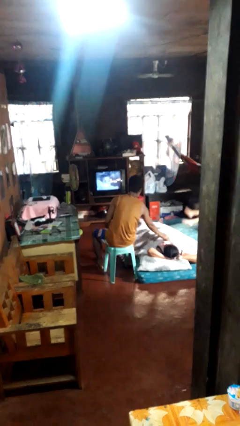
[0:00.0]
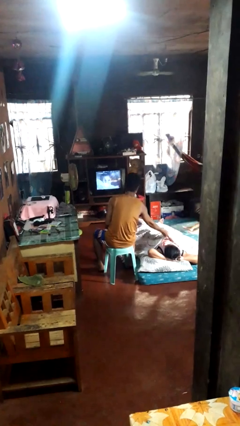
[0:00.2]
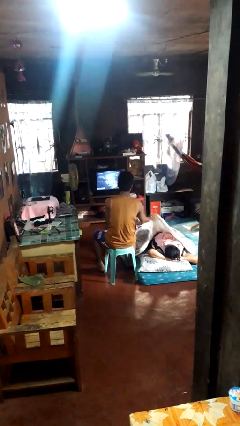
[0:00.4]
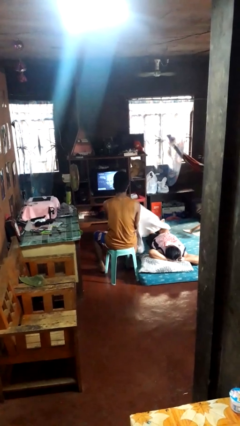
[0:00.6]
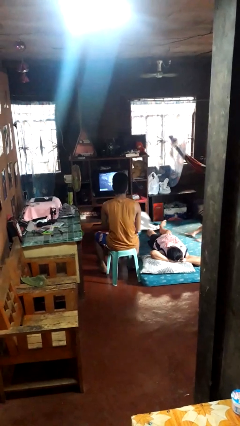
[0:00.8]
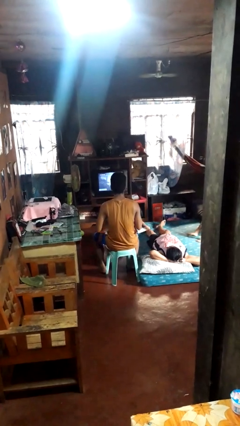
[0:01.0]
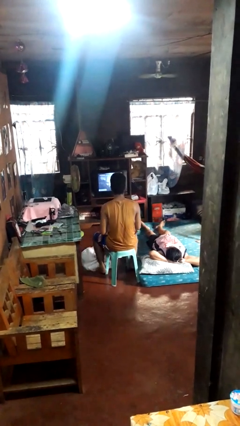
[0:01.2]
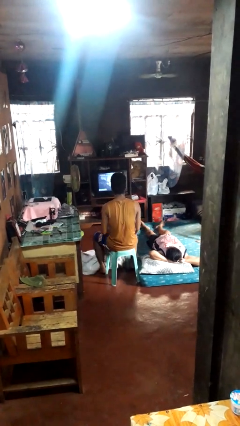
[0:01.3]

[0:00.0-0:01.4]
person uncovers friend with blanket

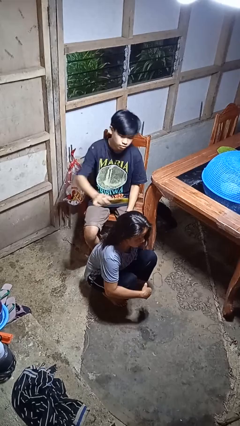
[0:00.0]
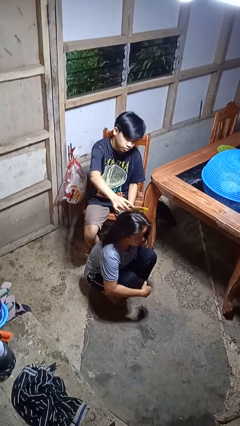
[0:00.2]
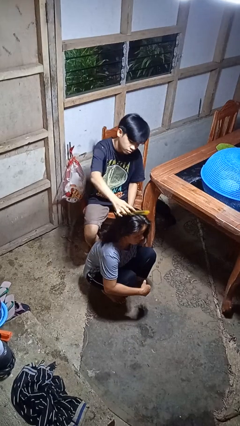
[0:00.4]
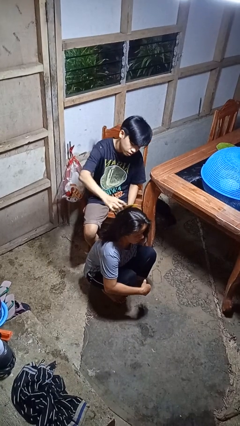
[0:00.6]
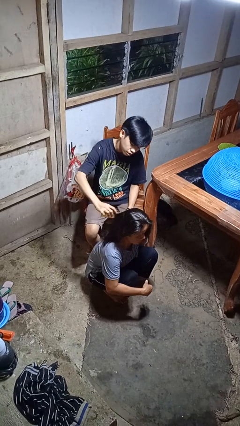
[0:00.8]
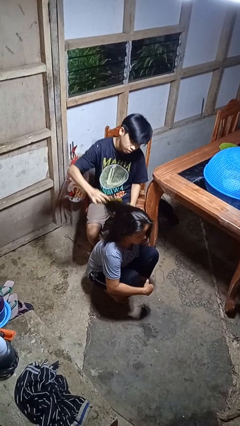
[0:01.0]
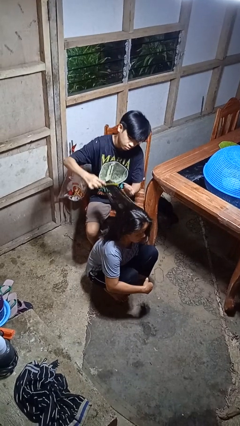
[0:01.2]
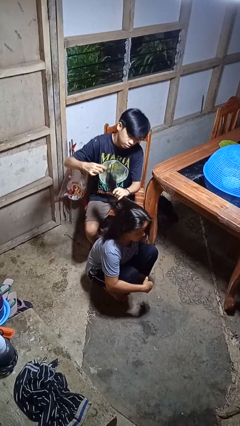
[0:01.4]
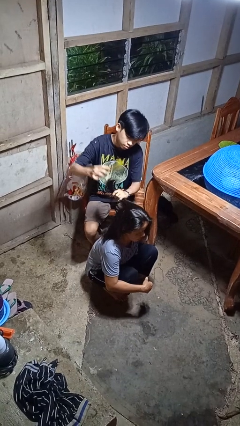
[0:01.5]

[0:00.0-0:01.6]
person brushes hair of person

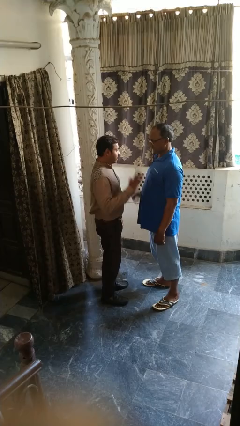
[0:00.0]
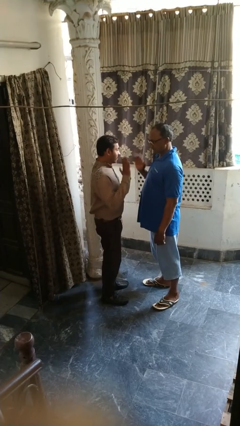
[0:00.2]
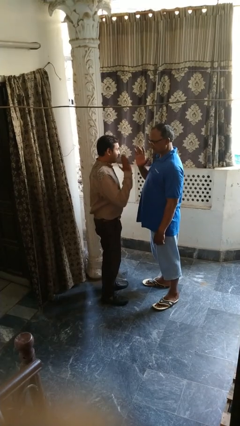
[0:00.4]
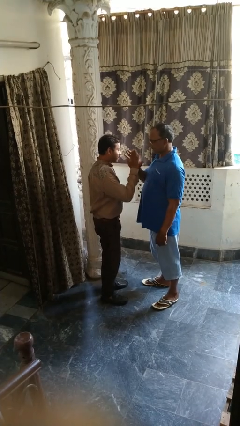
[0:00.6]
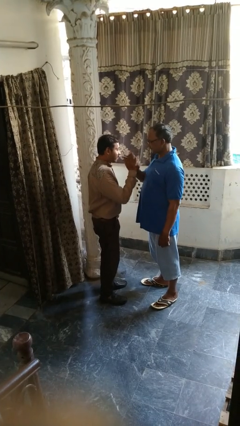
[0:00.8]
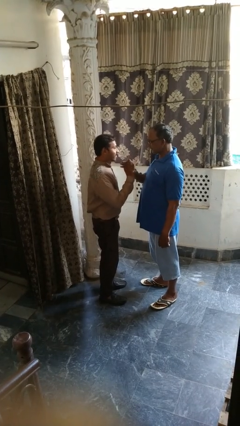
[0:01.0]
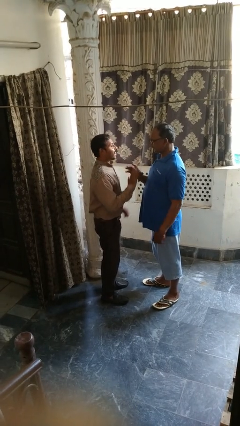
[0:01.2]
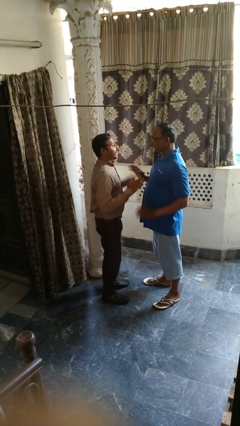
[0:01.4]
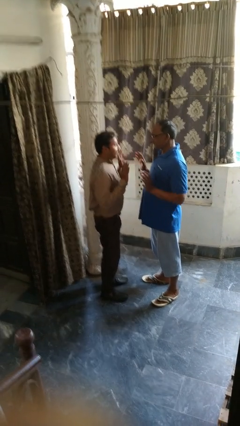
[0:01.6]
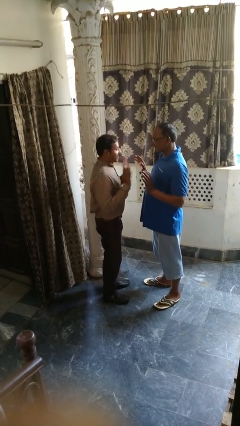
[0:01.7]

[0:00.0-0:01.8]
person highfives hand

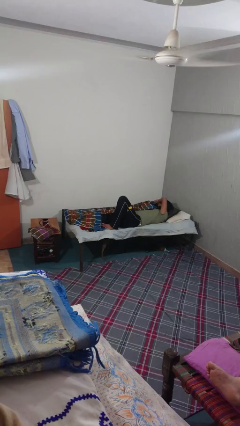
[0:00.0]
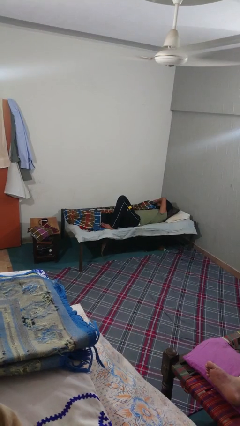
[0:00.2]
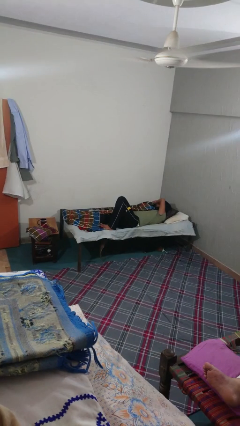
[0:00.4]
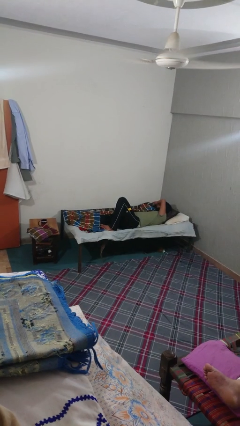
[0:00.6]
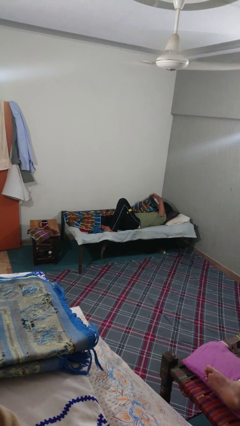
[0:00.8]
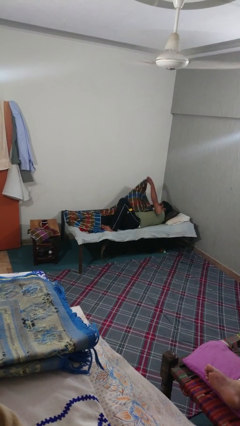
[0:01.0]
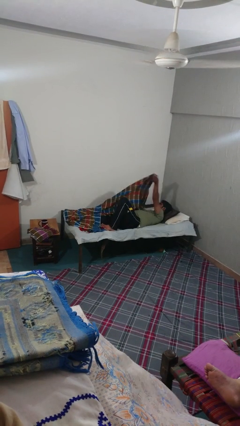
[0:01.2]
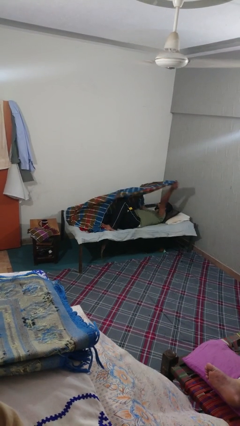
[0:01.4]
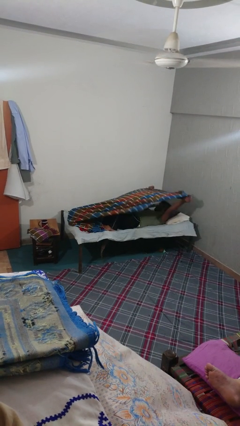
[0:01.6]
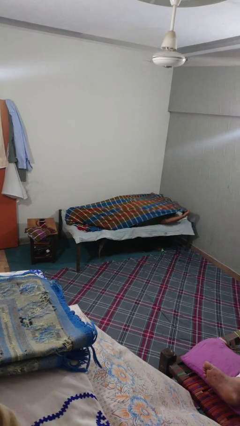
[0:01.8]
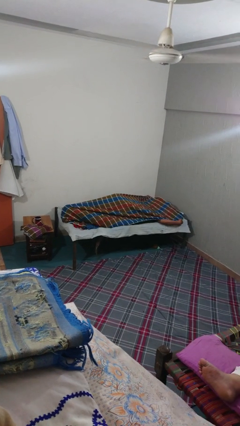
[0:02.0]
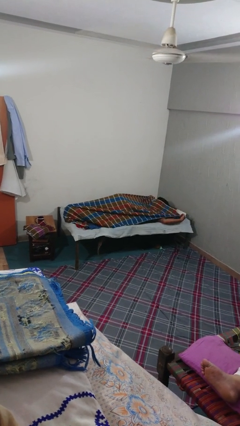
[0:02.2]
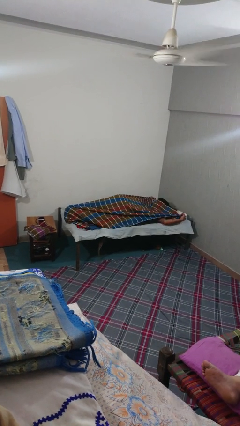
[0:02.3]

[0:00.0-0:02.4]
person covers with bedsheets

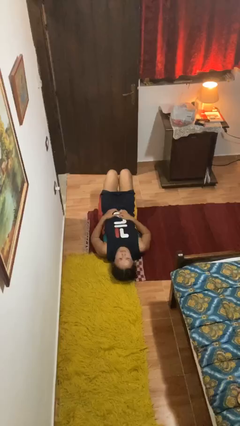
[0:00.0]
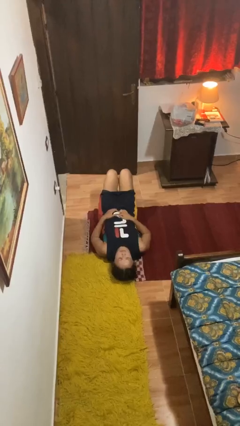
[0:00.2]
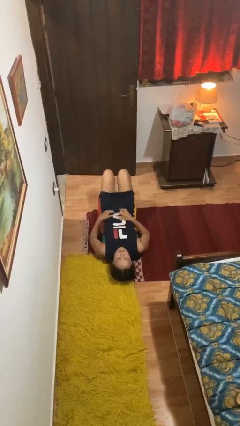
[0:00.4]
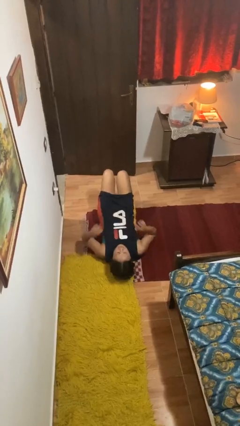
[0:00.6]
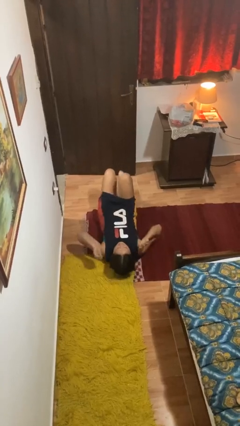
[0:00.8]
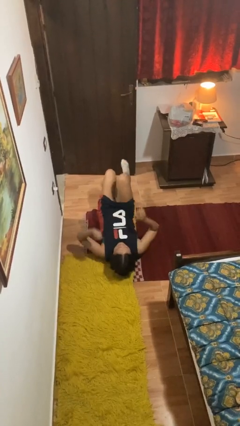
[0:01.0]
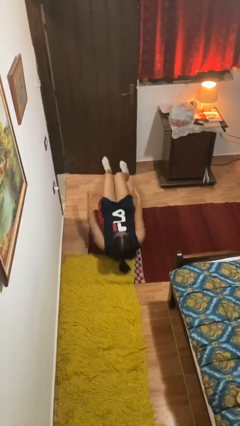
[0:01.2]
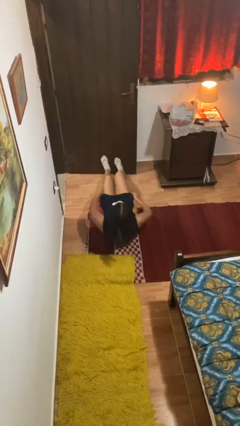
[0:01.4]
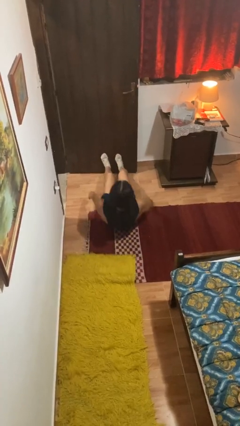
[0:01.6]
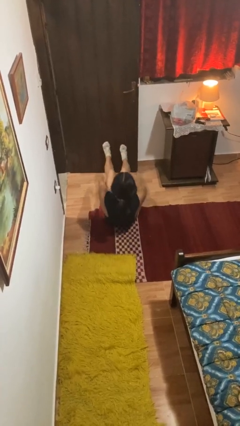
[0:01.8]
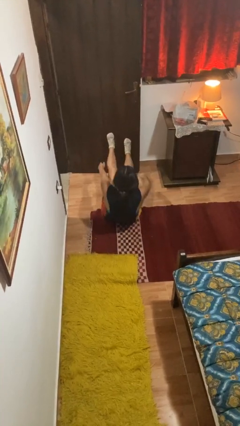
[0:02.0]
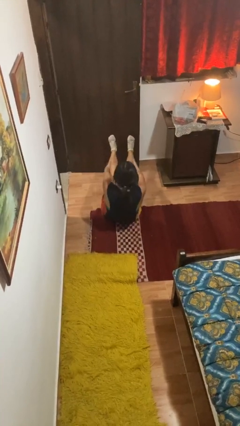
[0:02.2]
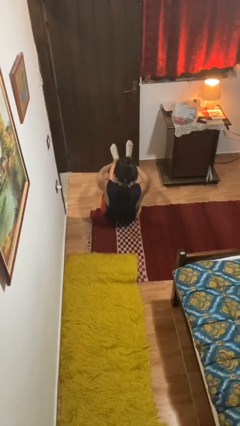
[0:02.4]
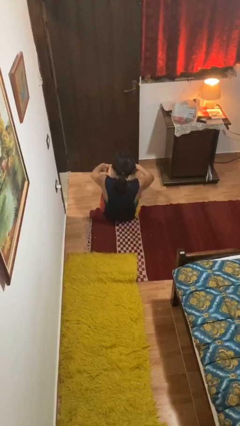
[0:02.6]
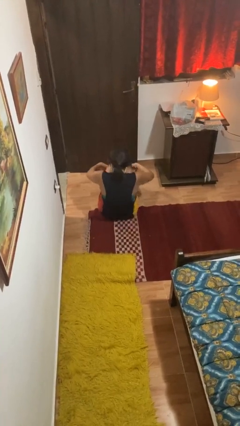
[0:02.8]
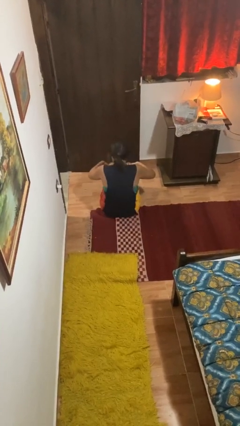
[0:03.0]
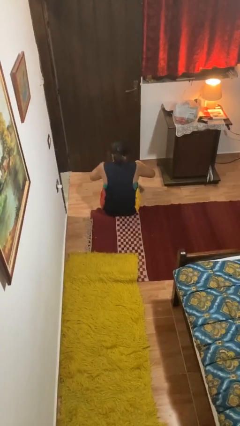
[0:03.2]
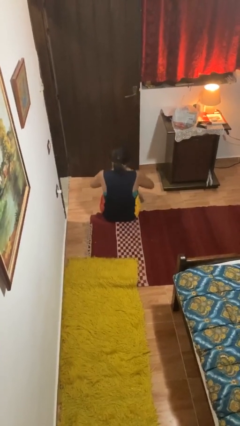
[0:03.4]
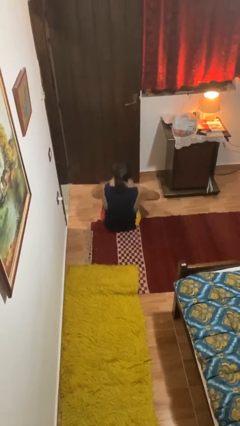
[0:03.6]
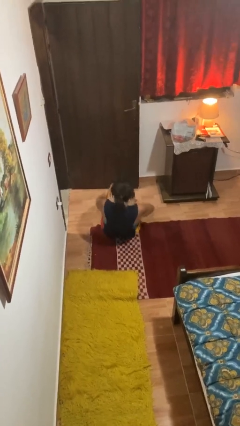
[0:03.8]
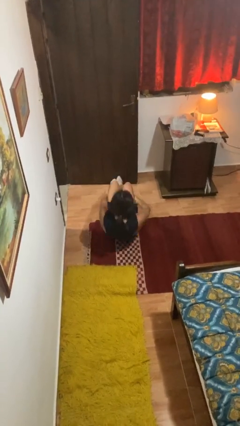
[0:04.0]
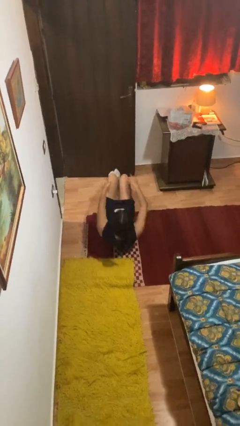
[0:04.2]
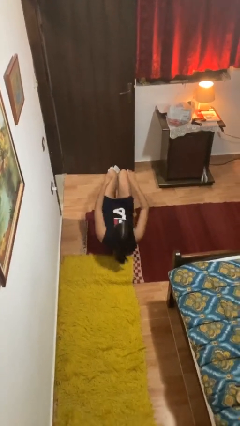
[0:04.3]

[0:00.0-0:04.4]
person exercises with situp

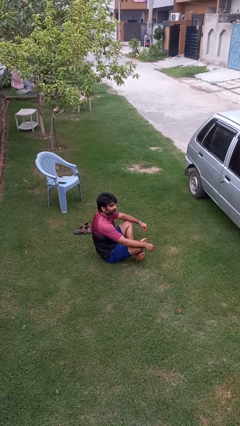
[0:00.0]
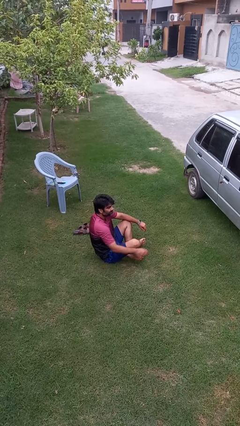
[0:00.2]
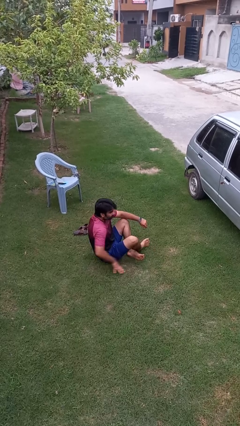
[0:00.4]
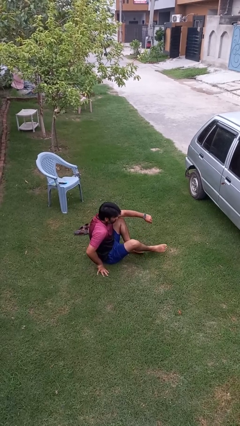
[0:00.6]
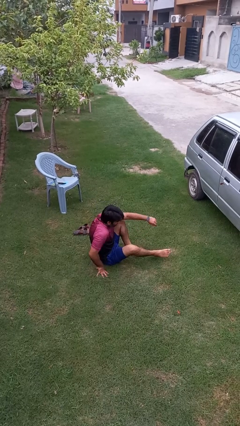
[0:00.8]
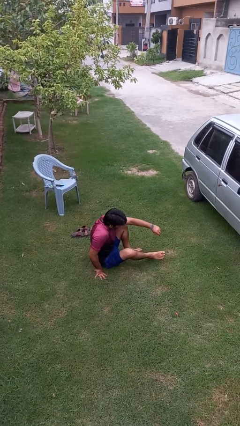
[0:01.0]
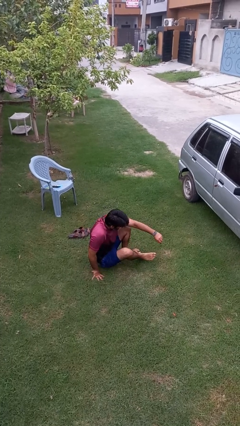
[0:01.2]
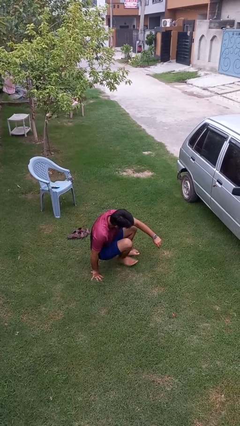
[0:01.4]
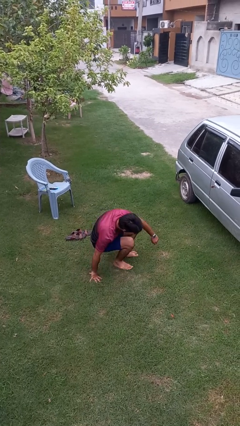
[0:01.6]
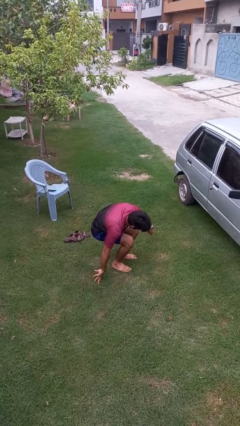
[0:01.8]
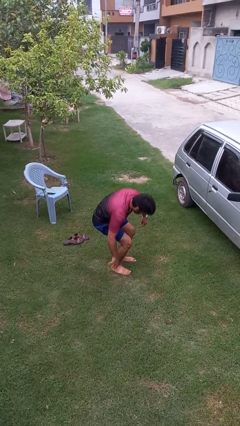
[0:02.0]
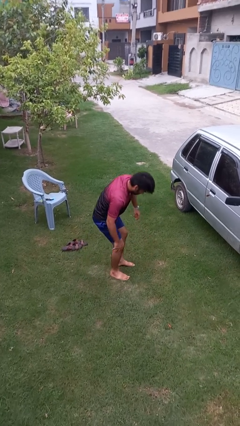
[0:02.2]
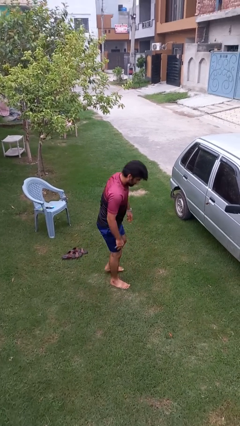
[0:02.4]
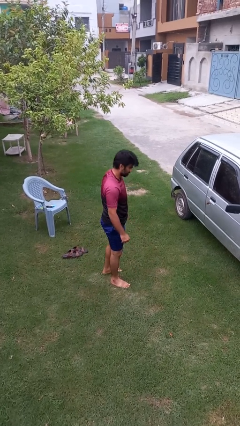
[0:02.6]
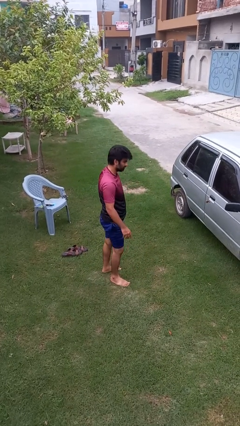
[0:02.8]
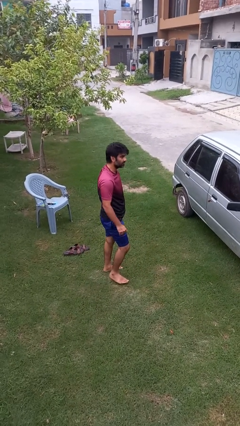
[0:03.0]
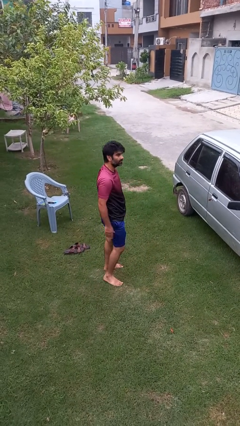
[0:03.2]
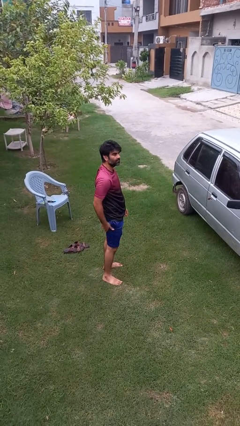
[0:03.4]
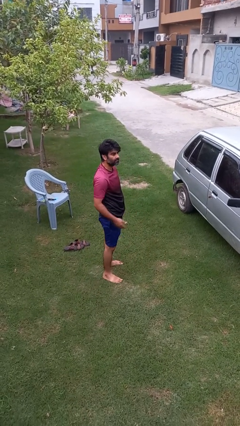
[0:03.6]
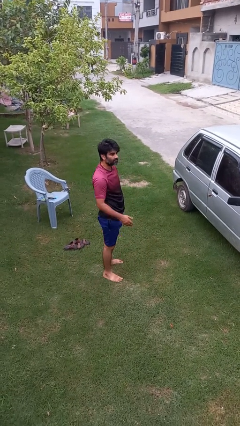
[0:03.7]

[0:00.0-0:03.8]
person stands up from floor

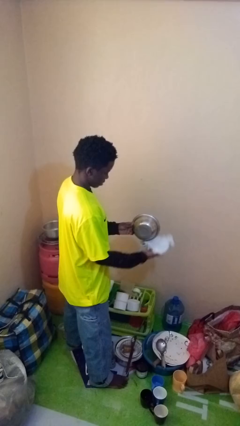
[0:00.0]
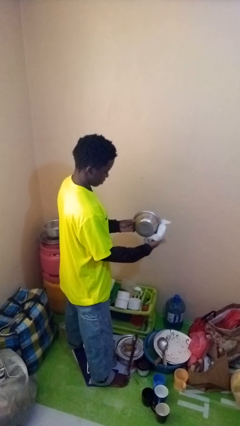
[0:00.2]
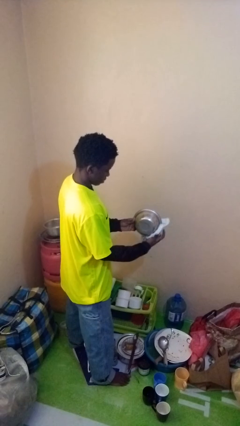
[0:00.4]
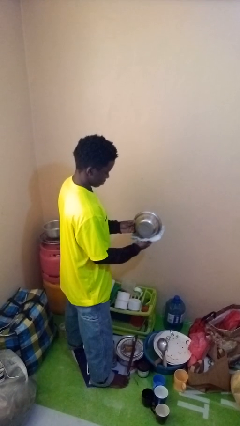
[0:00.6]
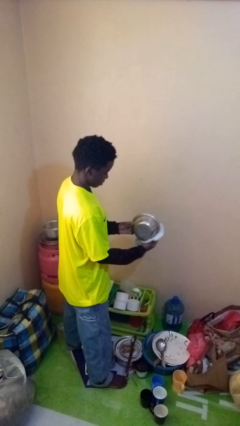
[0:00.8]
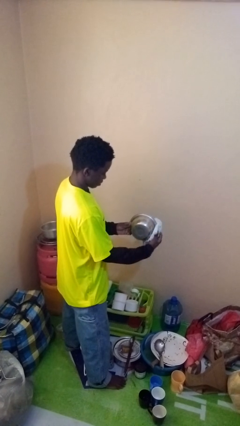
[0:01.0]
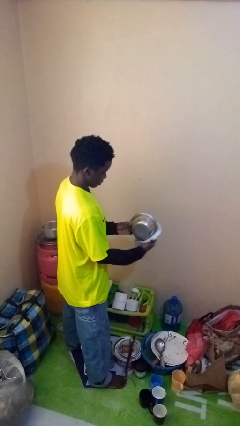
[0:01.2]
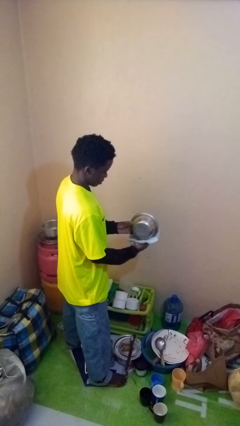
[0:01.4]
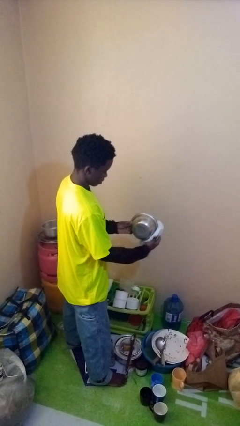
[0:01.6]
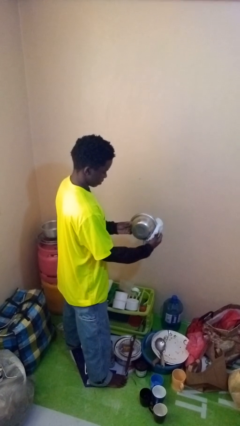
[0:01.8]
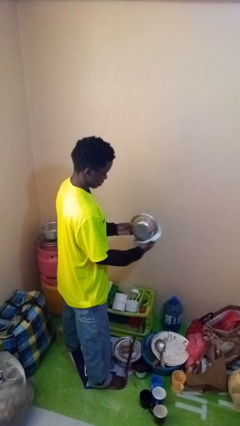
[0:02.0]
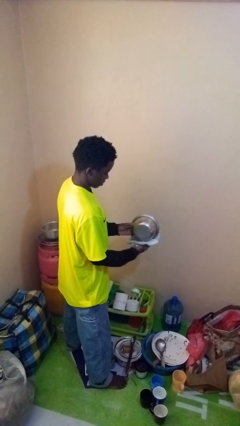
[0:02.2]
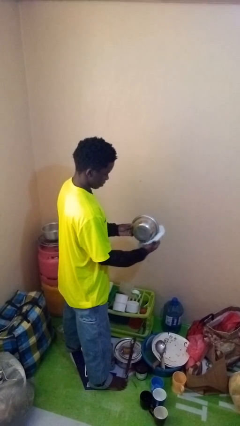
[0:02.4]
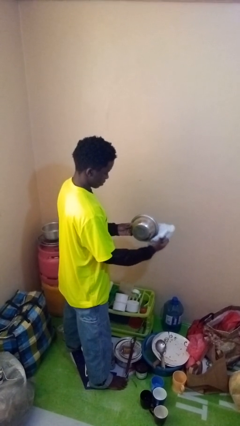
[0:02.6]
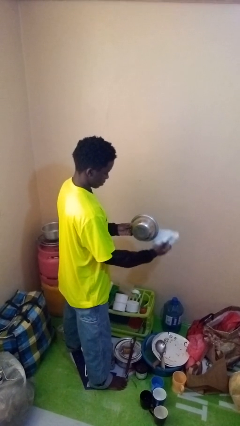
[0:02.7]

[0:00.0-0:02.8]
person dries dish
